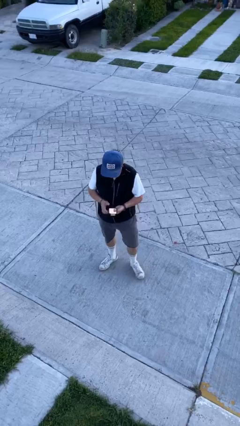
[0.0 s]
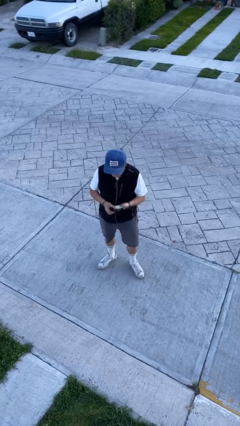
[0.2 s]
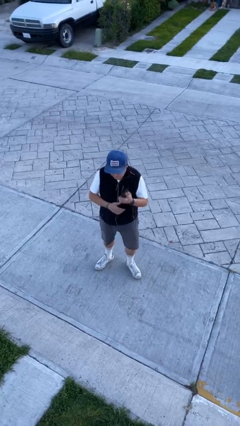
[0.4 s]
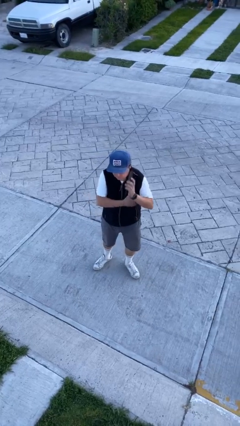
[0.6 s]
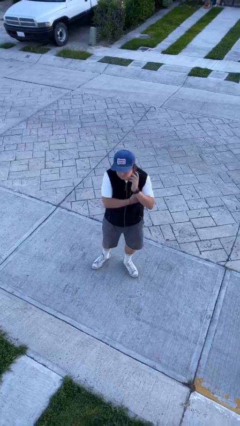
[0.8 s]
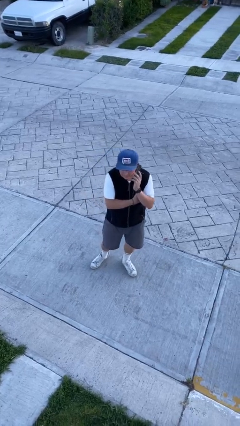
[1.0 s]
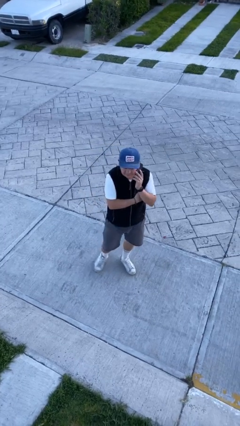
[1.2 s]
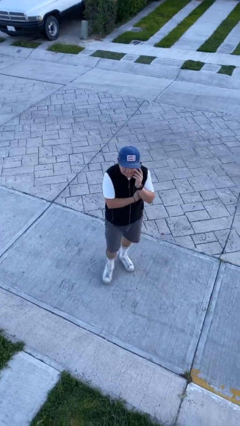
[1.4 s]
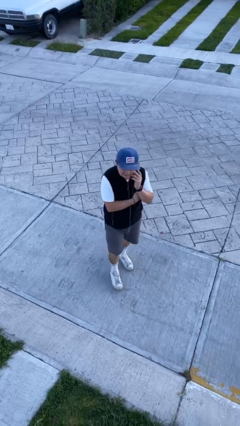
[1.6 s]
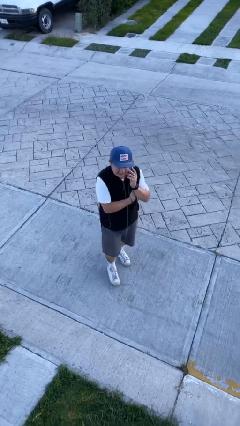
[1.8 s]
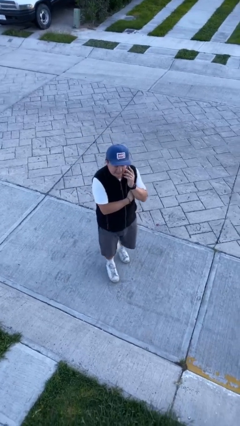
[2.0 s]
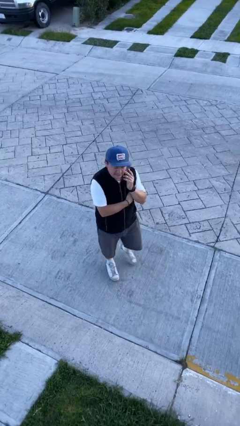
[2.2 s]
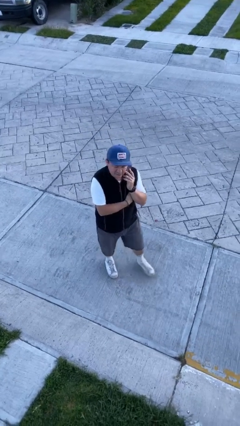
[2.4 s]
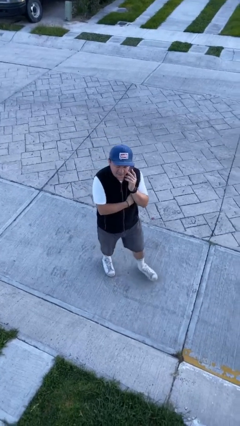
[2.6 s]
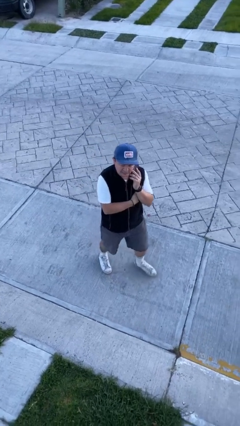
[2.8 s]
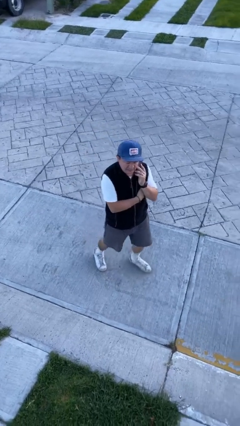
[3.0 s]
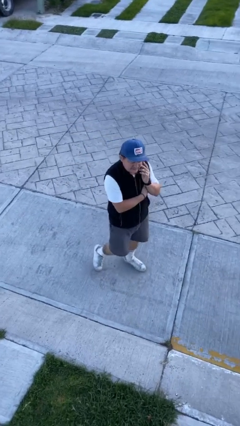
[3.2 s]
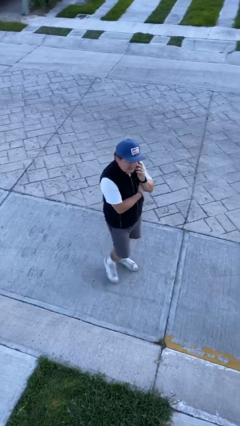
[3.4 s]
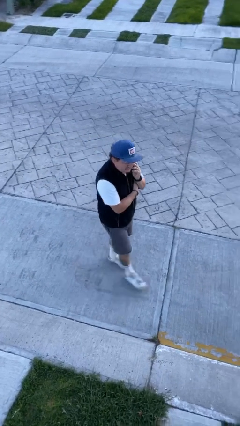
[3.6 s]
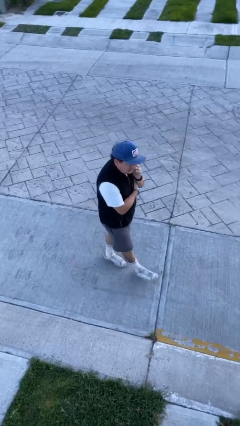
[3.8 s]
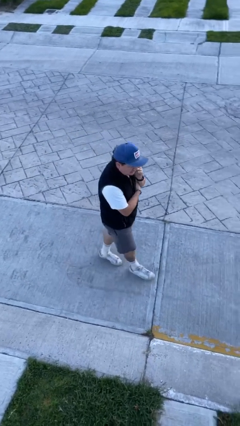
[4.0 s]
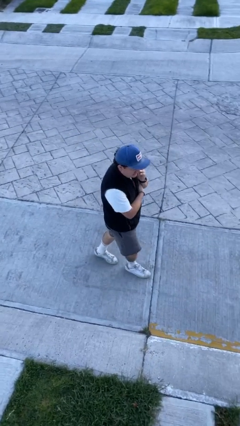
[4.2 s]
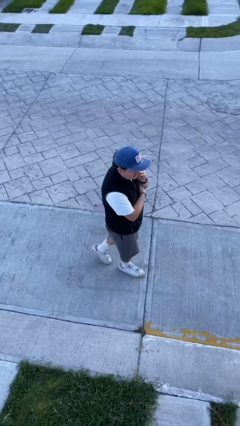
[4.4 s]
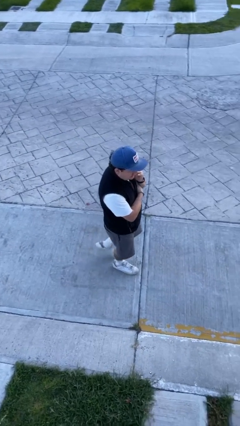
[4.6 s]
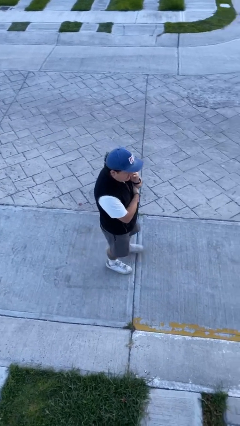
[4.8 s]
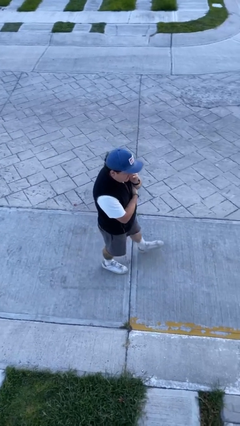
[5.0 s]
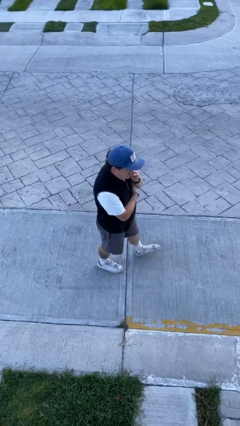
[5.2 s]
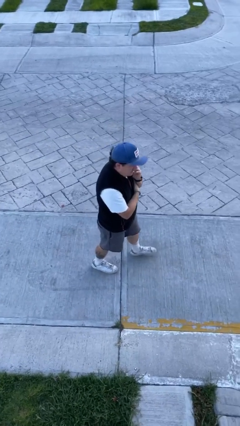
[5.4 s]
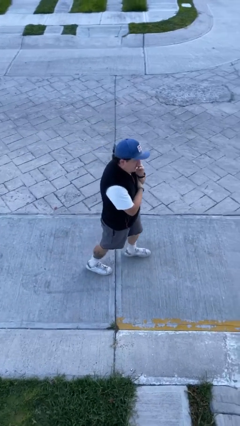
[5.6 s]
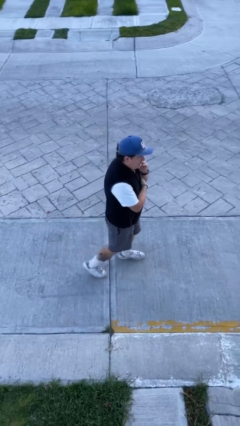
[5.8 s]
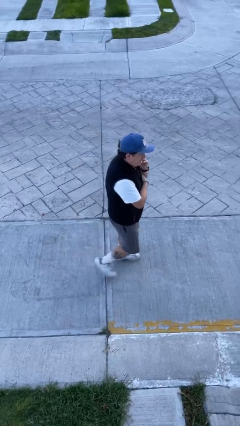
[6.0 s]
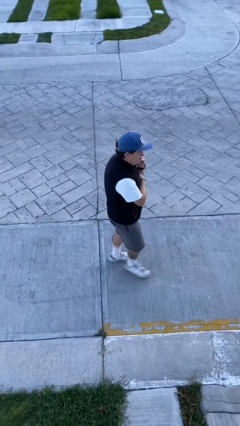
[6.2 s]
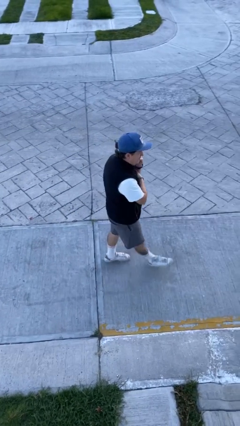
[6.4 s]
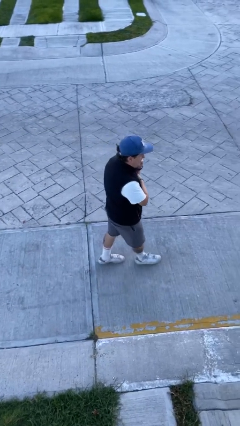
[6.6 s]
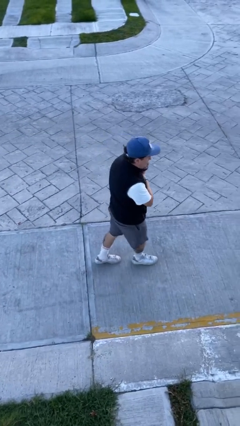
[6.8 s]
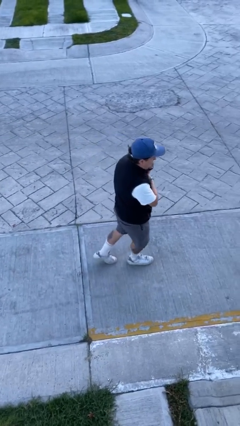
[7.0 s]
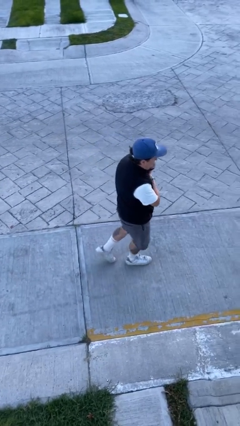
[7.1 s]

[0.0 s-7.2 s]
person talks on phone

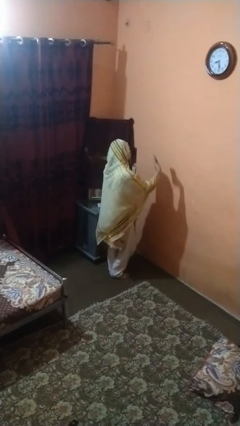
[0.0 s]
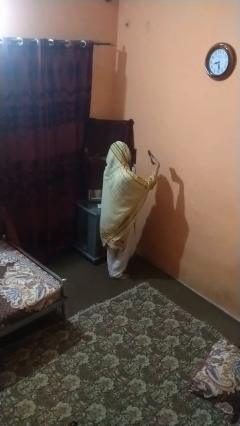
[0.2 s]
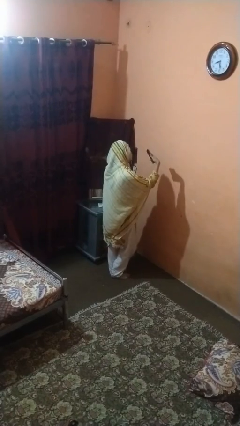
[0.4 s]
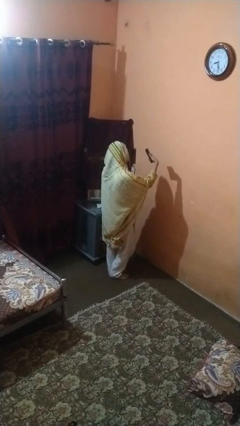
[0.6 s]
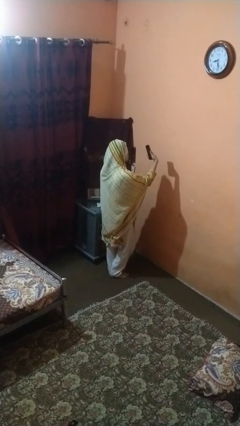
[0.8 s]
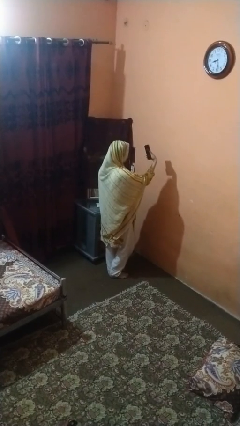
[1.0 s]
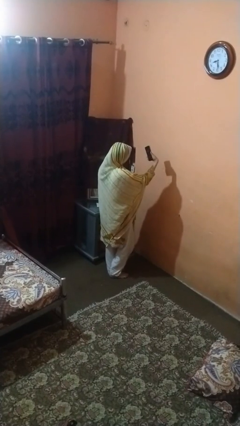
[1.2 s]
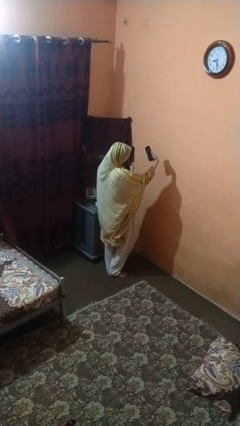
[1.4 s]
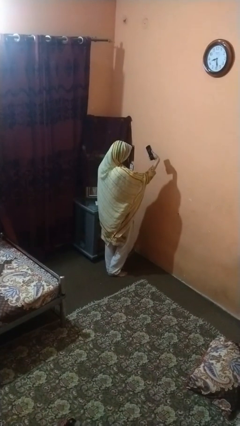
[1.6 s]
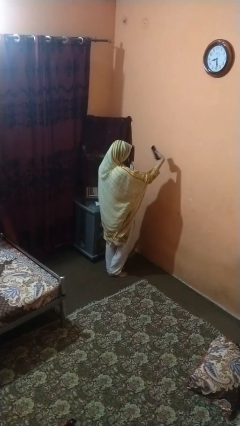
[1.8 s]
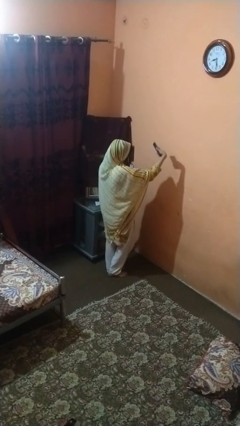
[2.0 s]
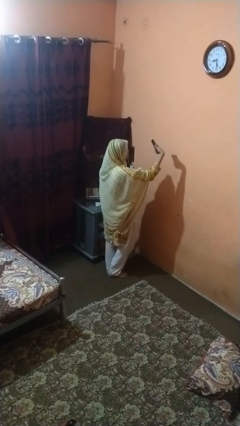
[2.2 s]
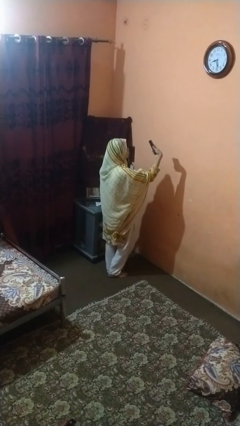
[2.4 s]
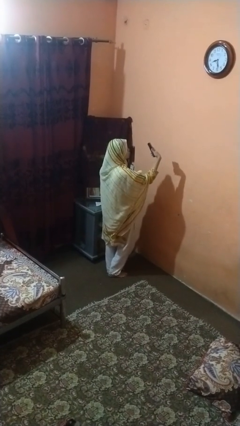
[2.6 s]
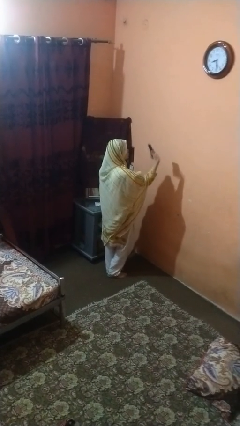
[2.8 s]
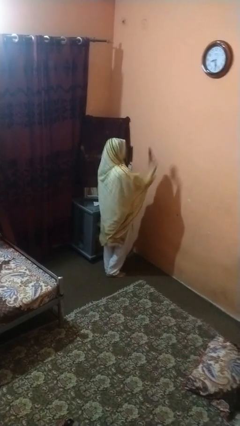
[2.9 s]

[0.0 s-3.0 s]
person takes selfie

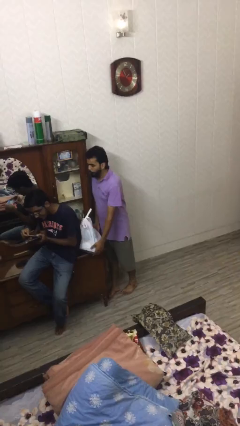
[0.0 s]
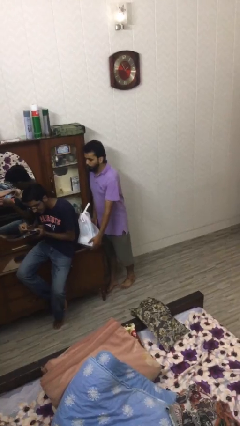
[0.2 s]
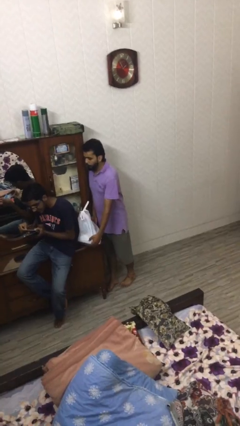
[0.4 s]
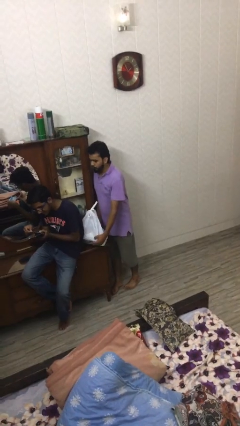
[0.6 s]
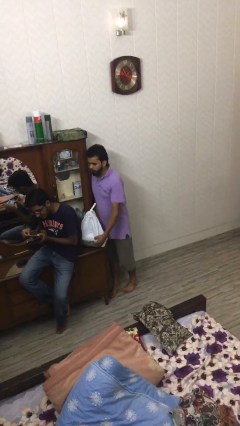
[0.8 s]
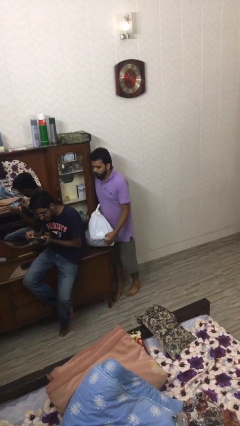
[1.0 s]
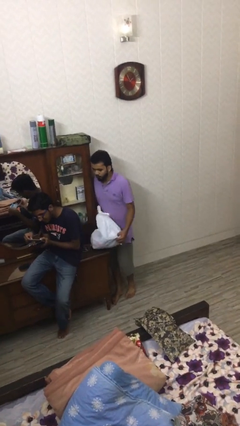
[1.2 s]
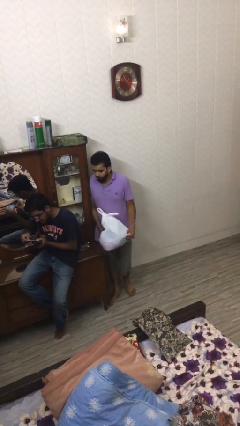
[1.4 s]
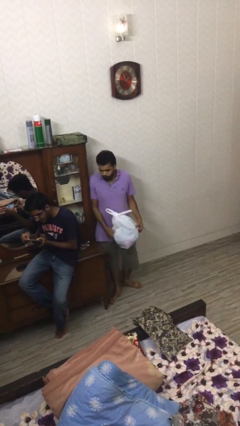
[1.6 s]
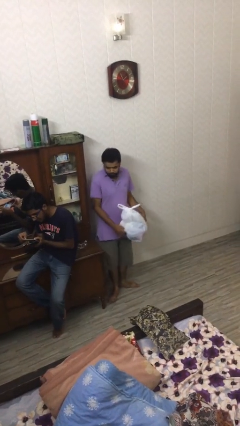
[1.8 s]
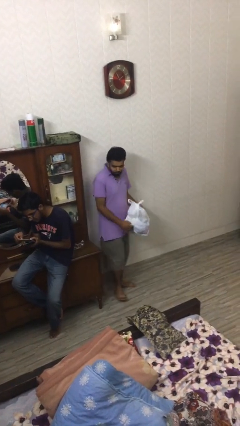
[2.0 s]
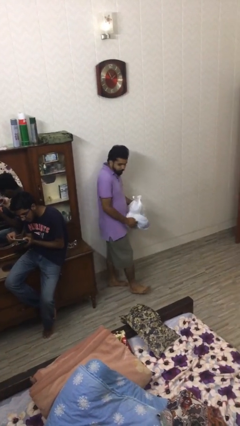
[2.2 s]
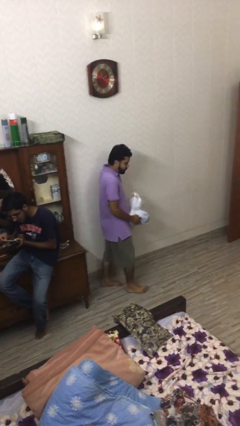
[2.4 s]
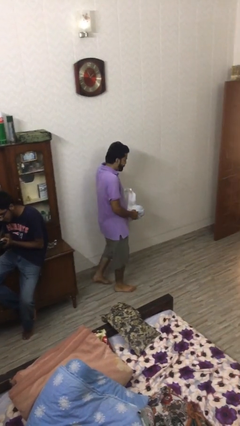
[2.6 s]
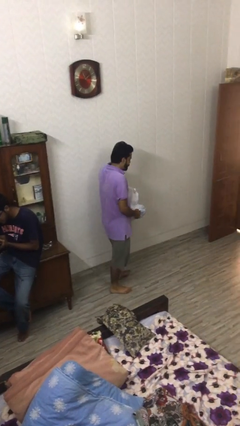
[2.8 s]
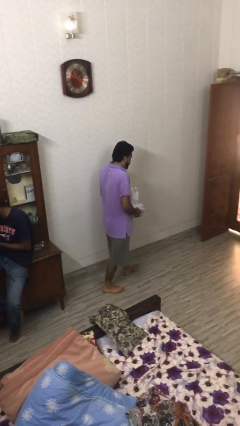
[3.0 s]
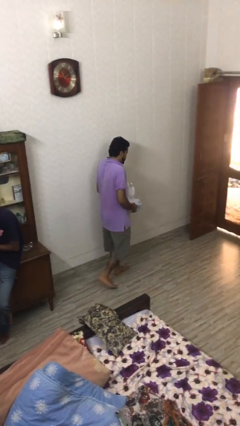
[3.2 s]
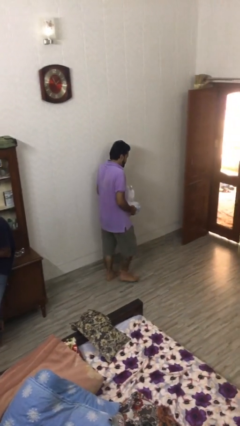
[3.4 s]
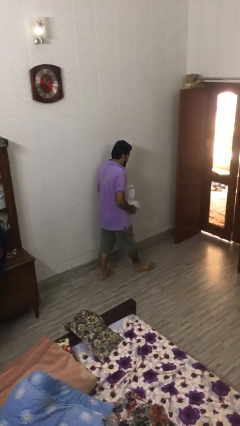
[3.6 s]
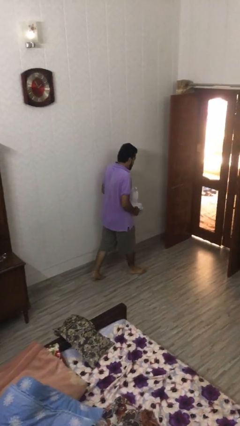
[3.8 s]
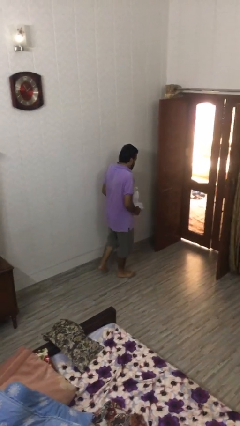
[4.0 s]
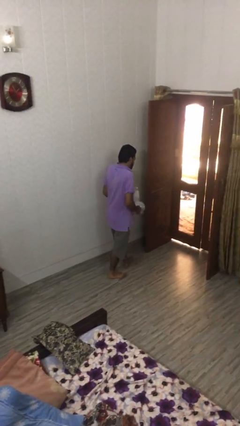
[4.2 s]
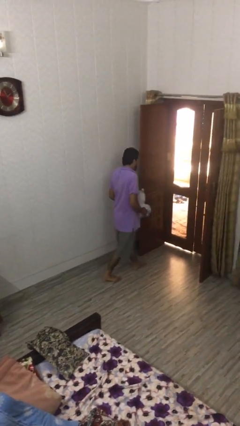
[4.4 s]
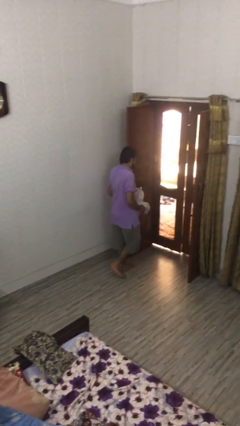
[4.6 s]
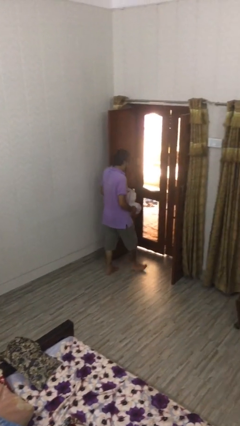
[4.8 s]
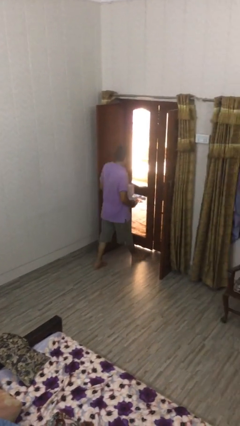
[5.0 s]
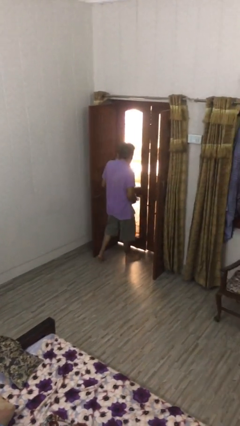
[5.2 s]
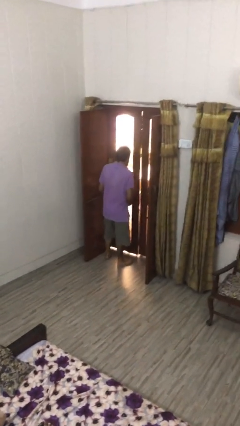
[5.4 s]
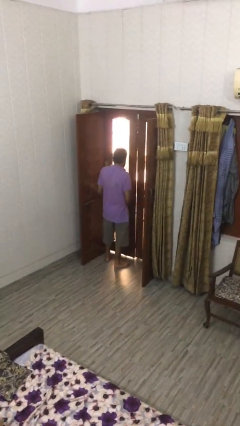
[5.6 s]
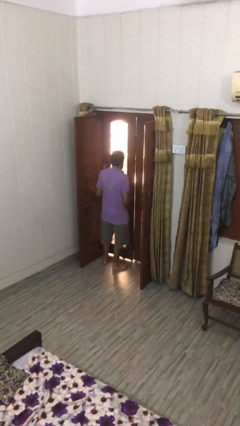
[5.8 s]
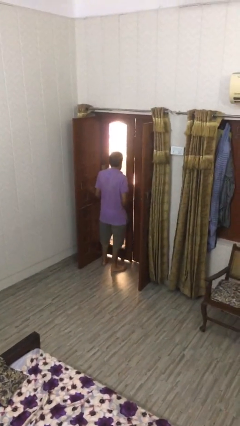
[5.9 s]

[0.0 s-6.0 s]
person steals object from person

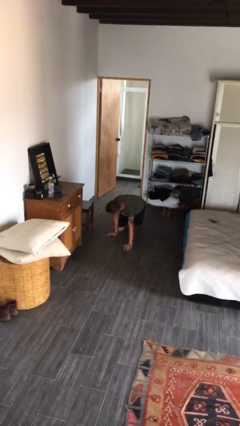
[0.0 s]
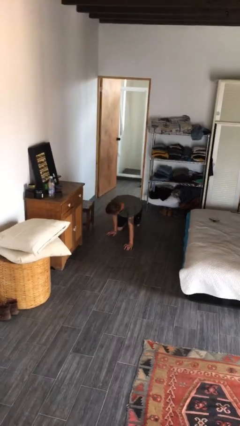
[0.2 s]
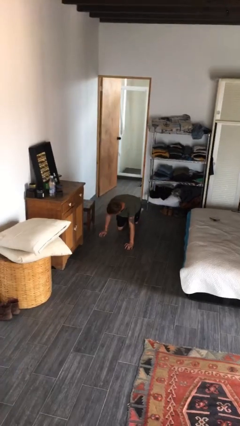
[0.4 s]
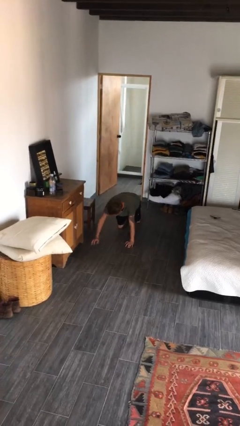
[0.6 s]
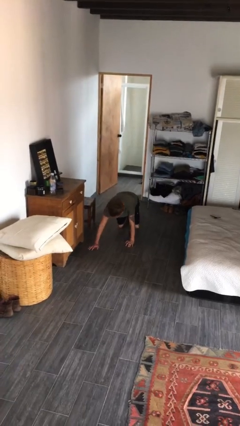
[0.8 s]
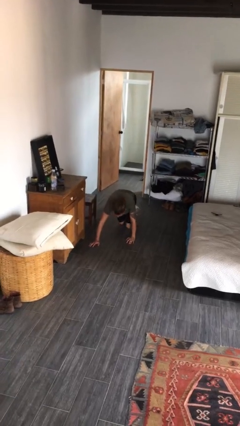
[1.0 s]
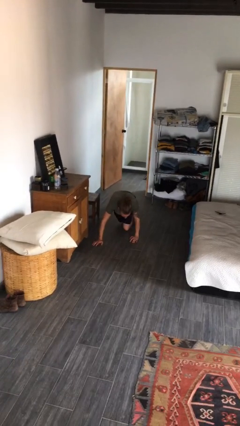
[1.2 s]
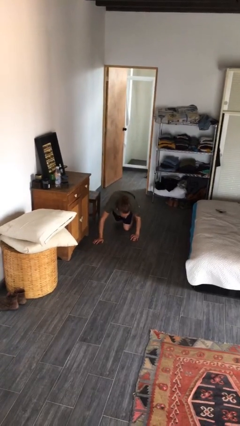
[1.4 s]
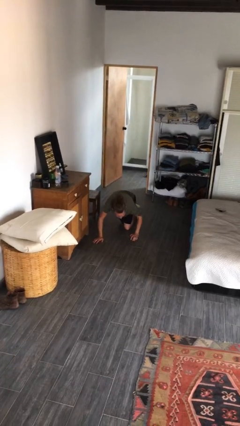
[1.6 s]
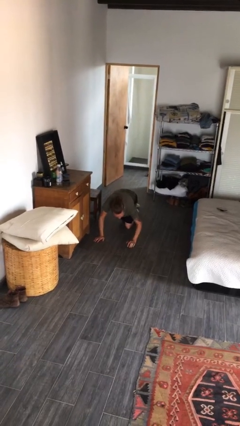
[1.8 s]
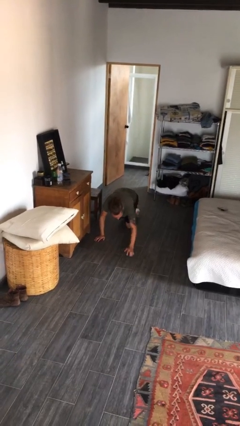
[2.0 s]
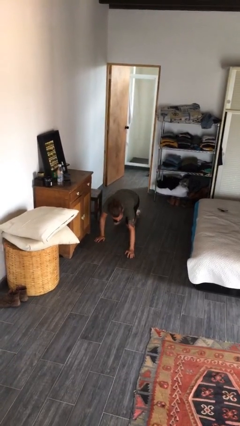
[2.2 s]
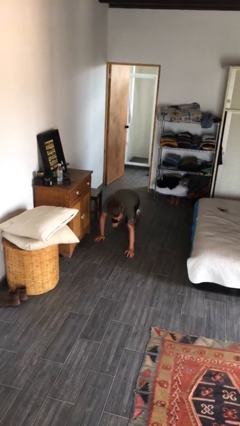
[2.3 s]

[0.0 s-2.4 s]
person crawls
